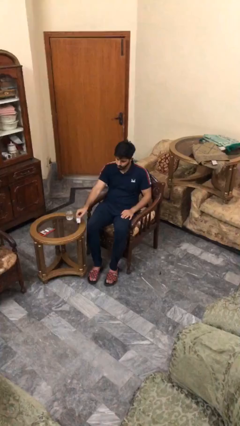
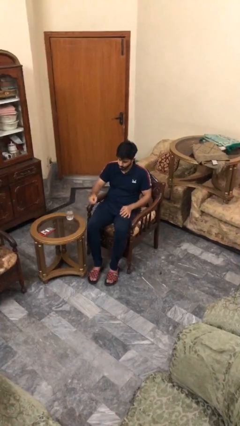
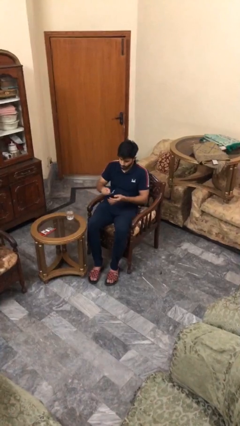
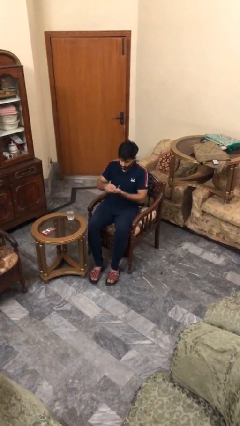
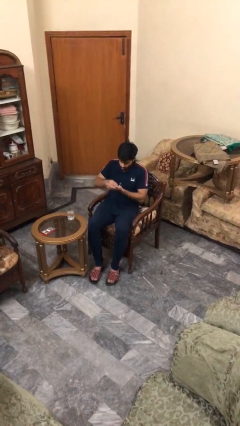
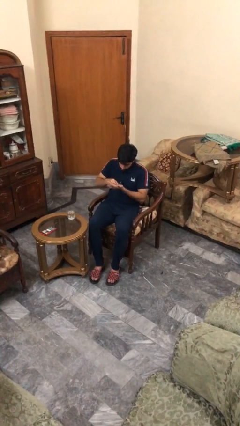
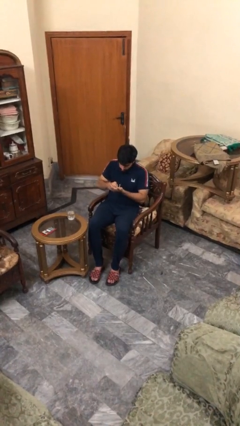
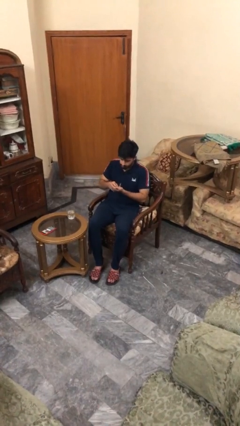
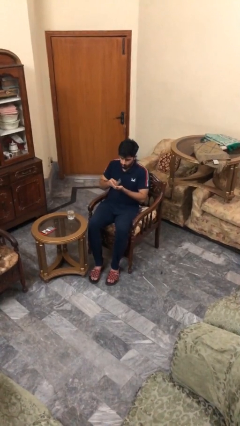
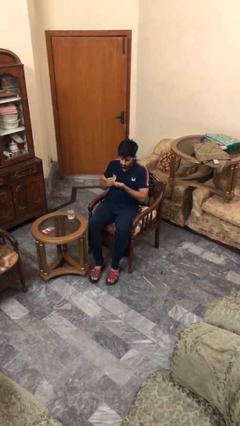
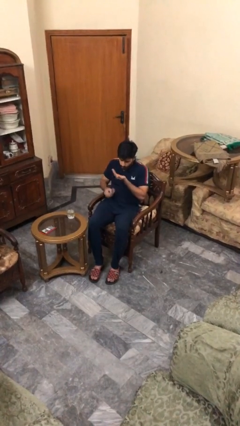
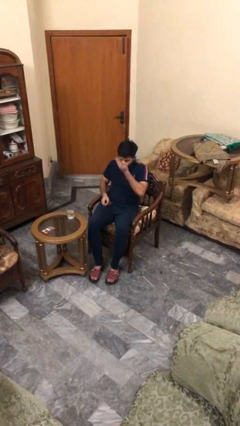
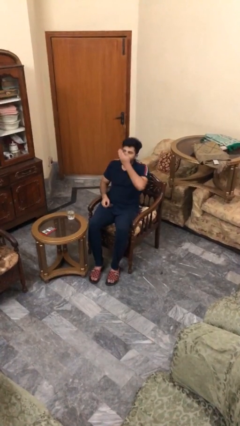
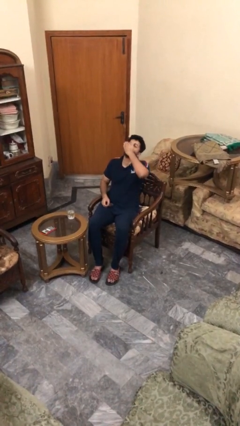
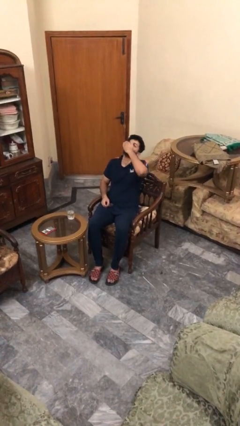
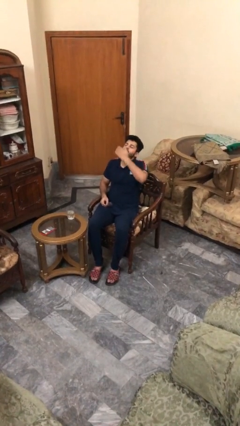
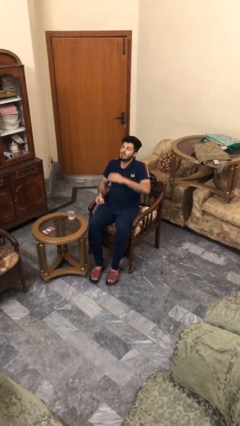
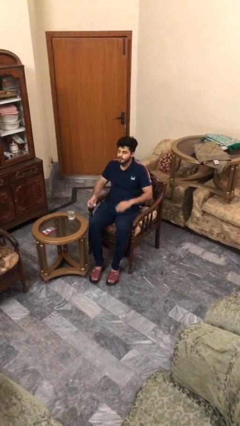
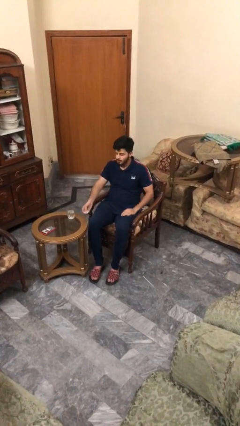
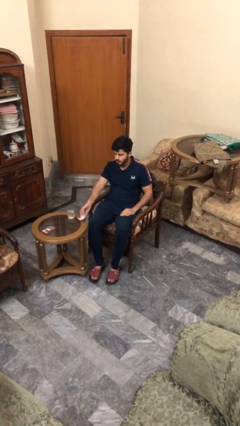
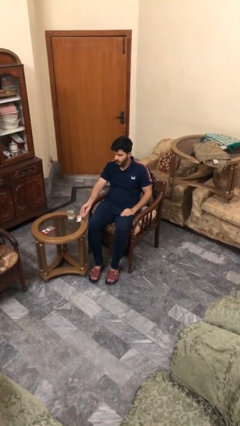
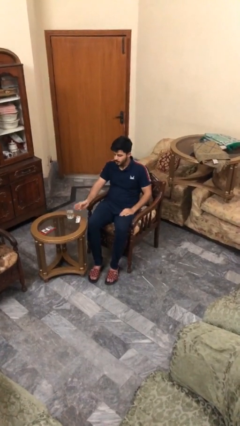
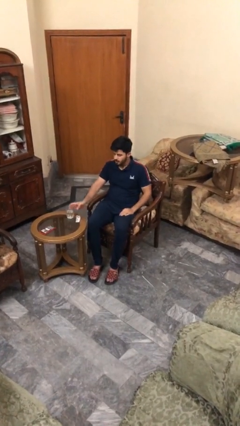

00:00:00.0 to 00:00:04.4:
person takes medicine pills

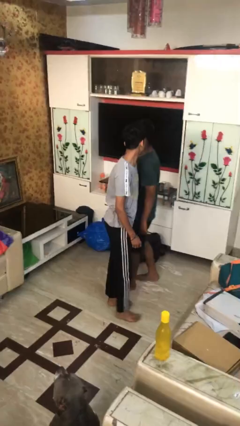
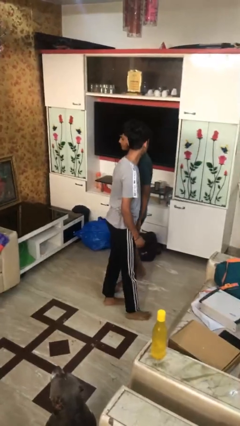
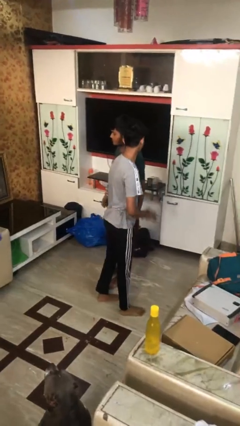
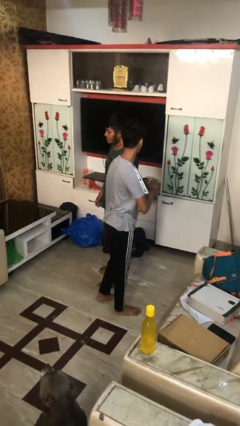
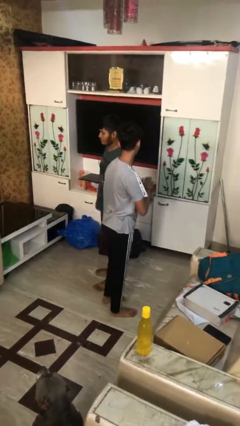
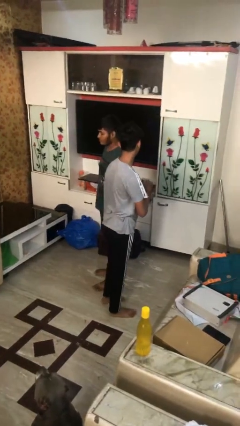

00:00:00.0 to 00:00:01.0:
person bumps into person

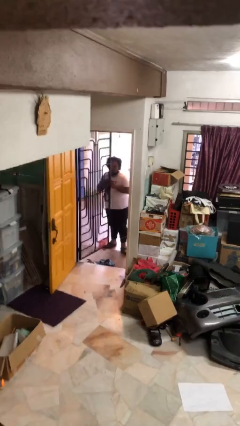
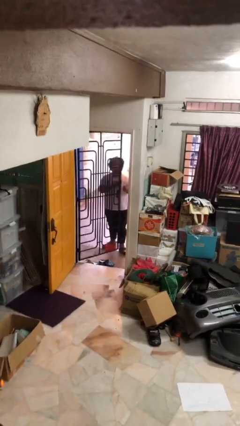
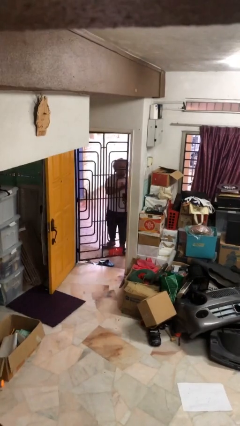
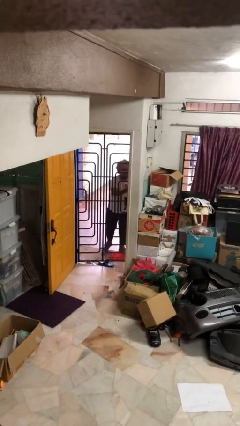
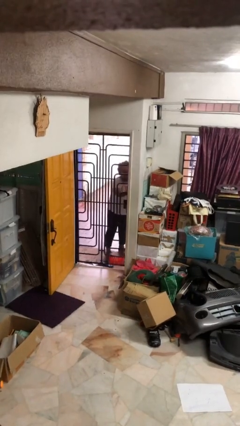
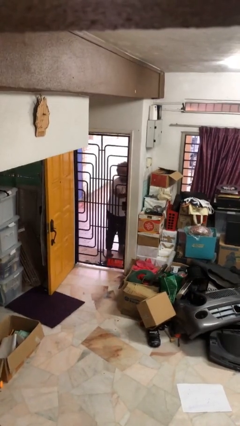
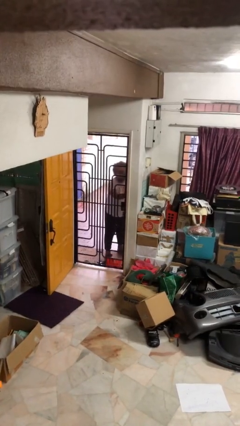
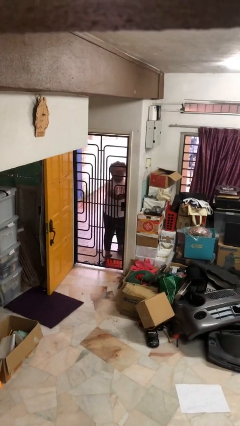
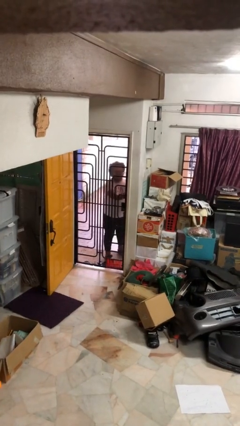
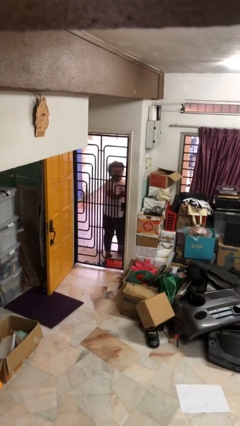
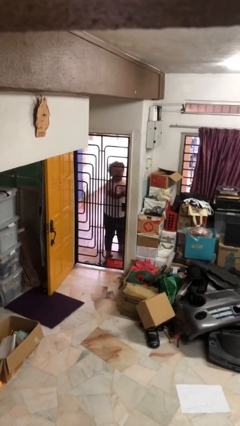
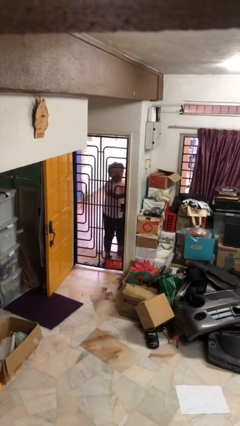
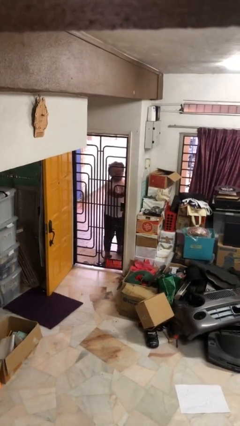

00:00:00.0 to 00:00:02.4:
person closes facility door

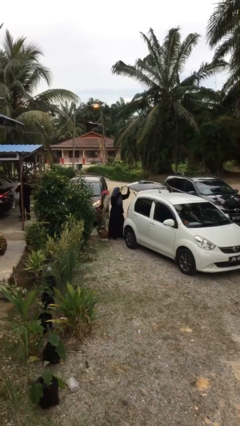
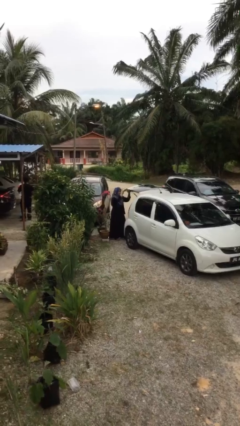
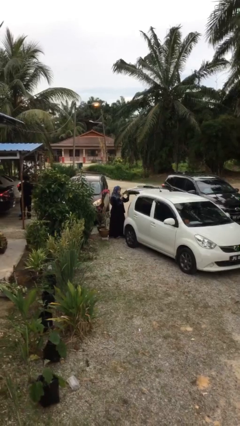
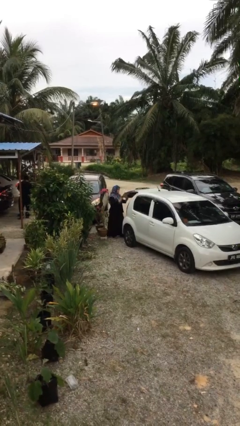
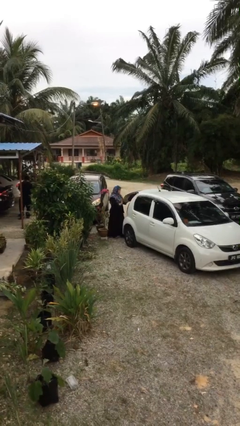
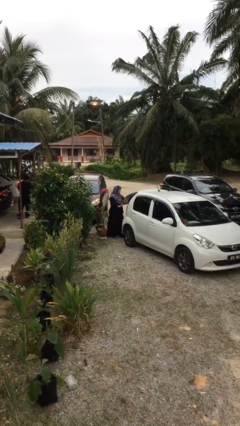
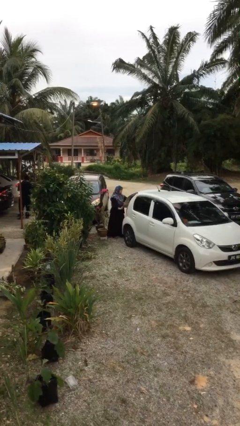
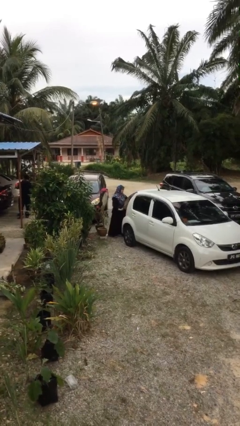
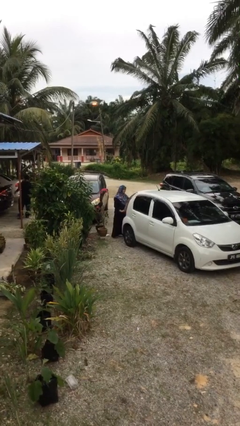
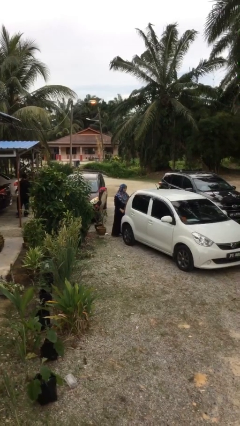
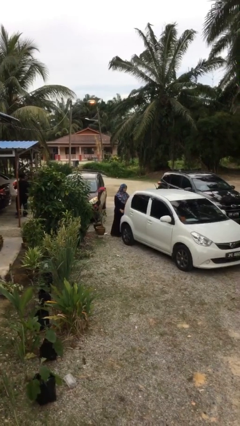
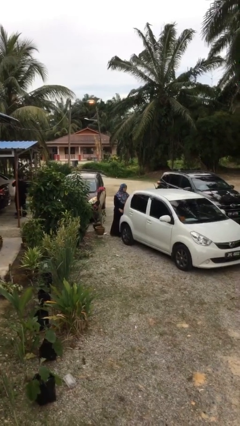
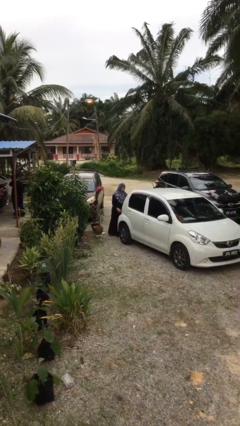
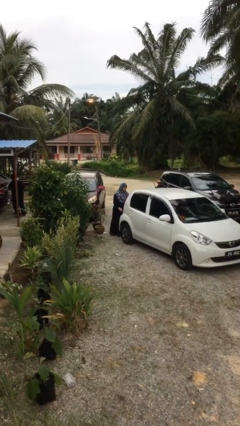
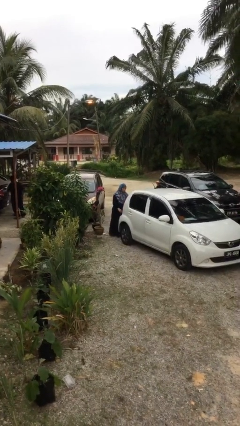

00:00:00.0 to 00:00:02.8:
person closes car trunk

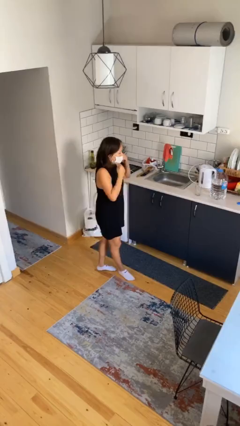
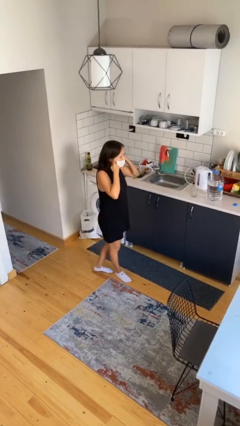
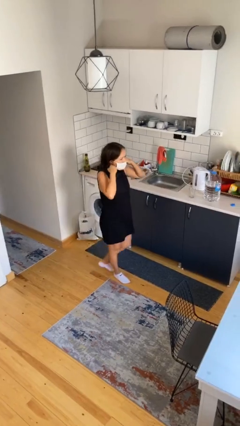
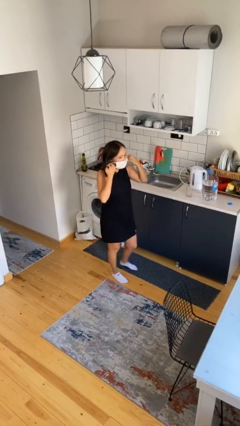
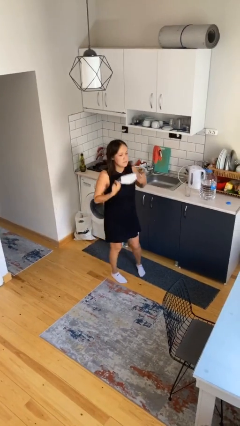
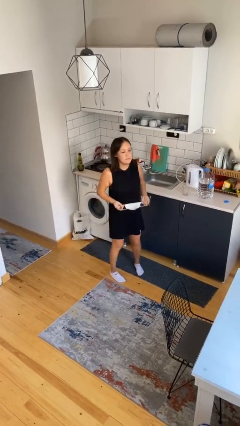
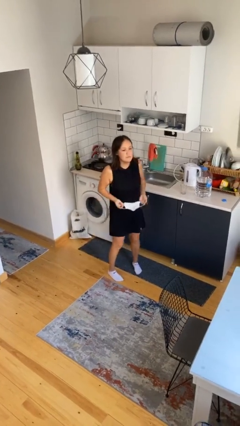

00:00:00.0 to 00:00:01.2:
person takes off facemask

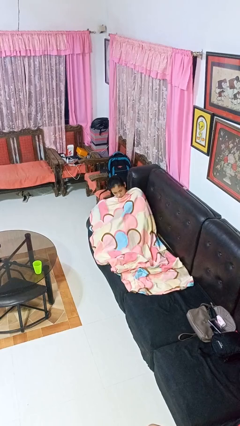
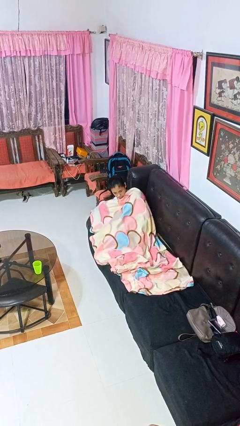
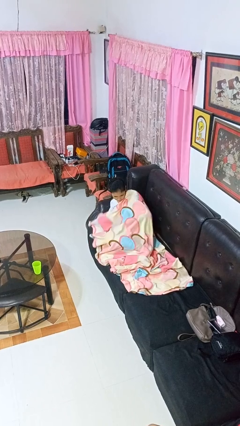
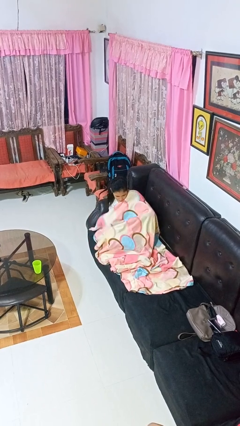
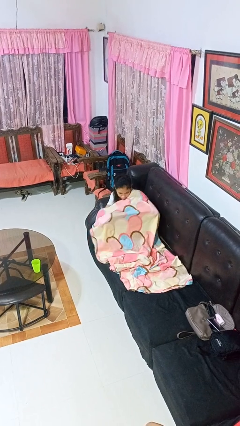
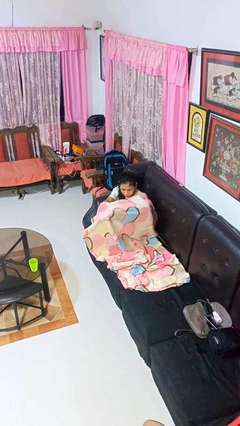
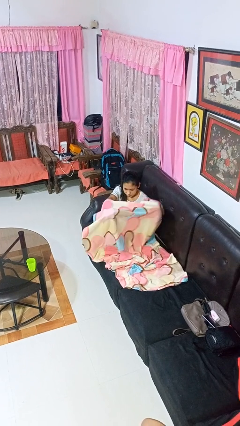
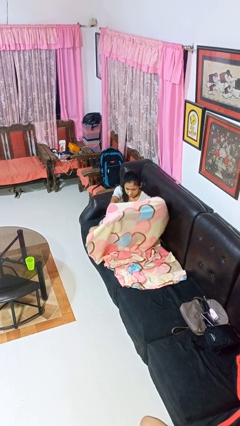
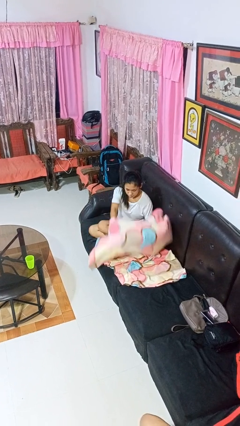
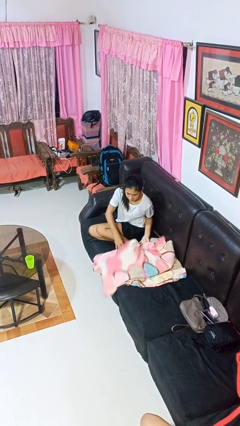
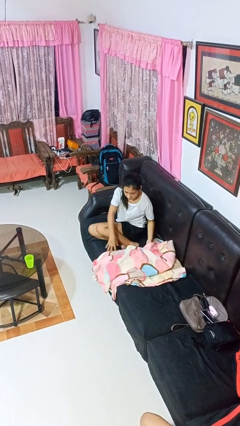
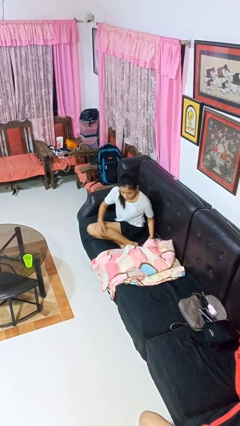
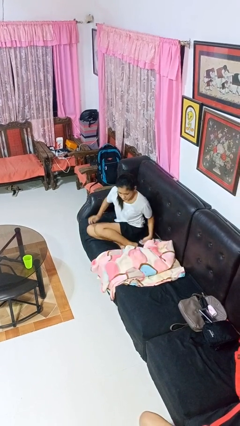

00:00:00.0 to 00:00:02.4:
person uncovers with blanket

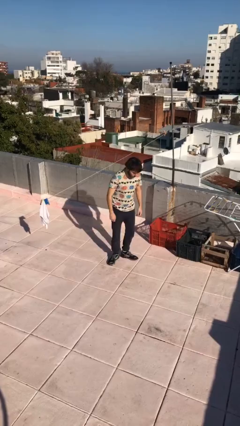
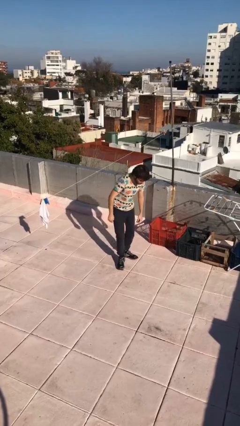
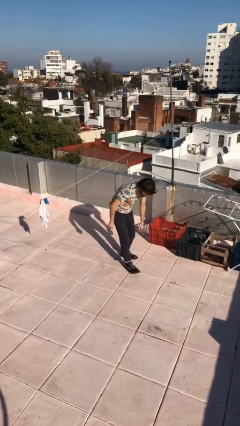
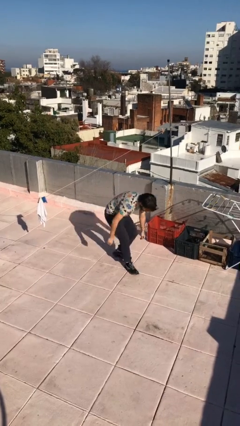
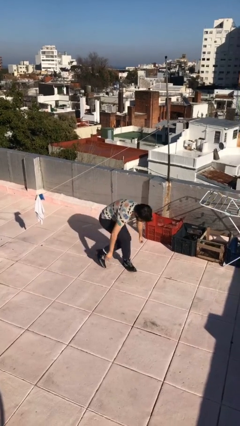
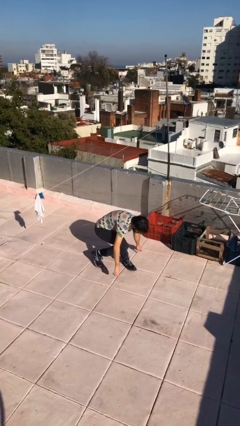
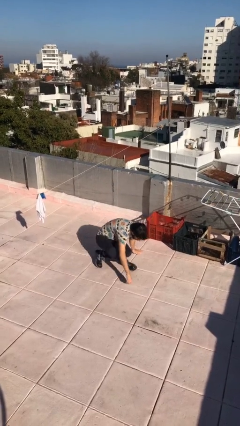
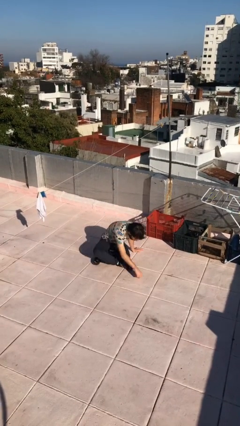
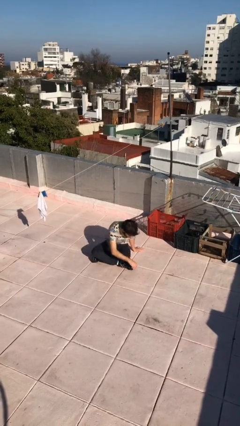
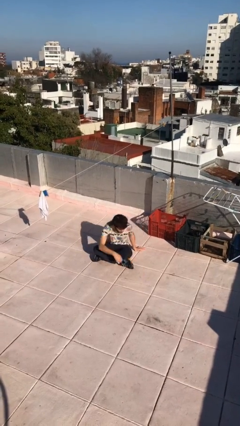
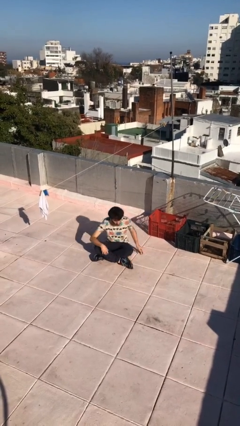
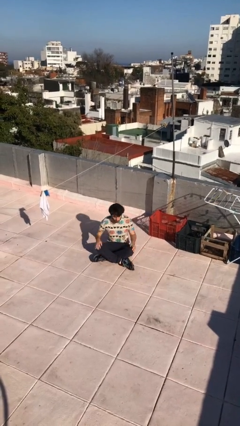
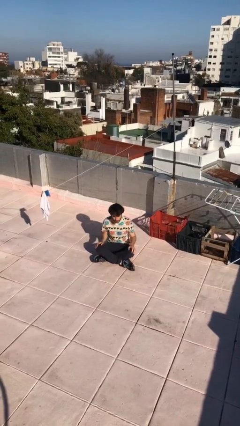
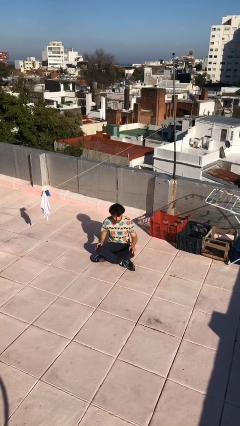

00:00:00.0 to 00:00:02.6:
person sits crisscross
